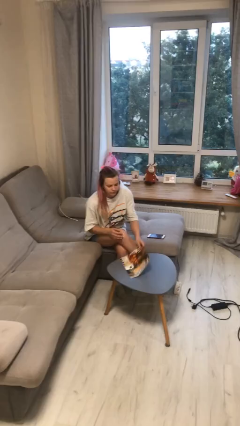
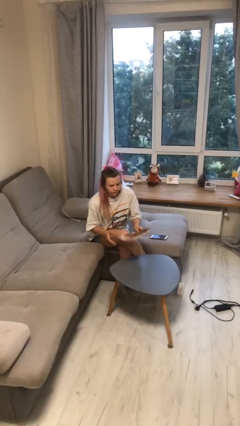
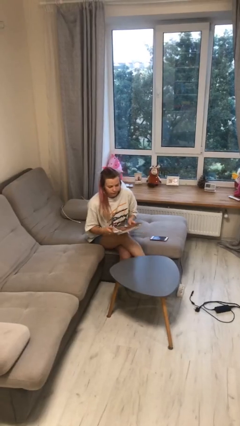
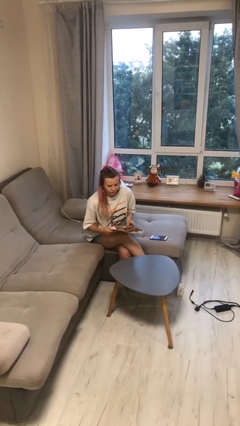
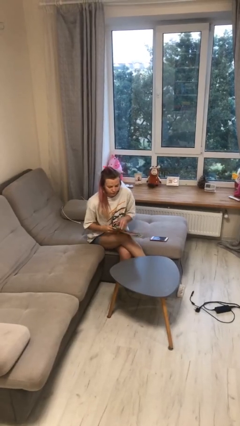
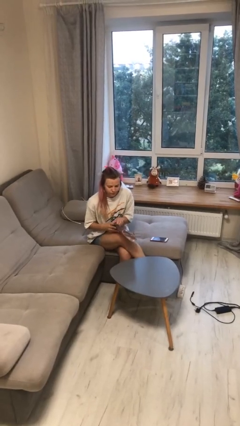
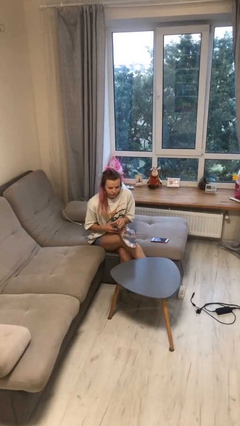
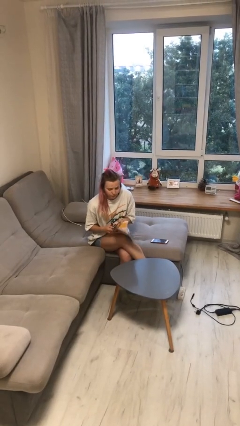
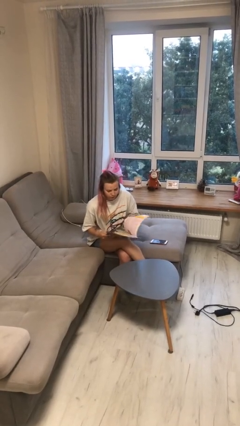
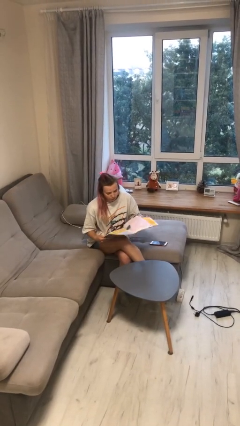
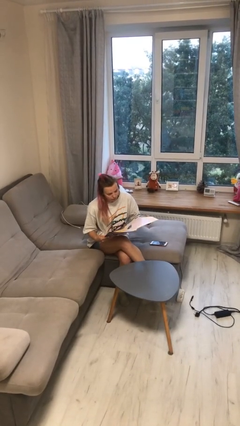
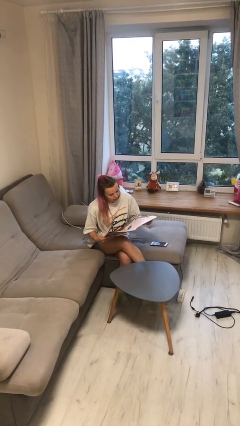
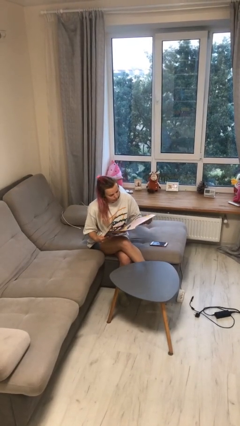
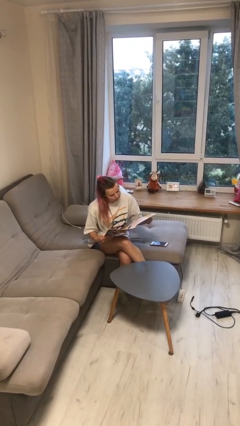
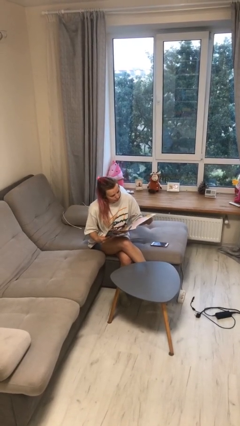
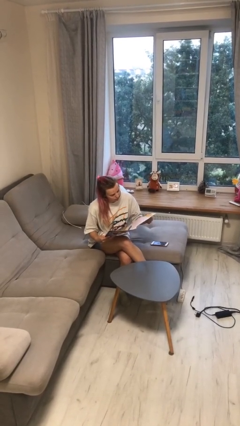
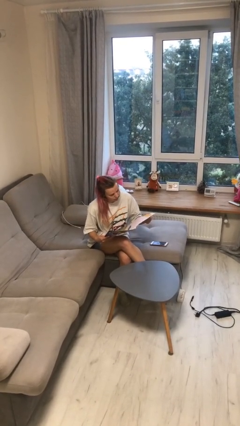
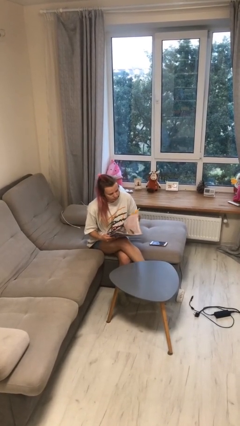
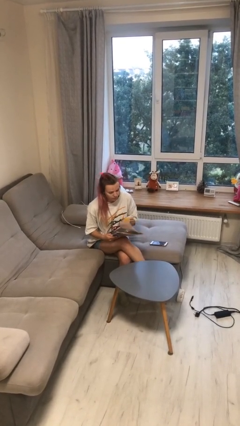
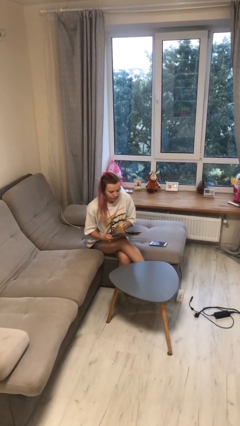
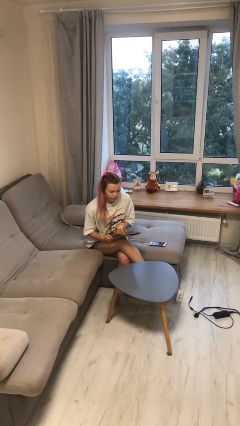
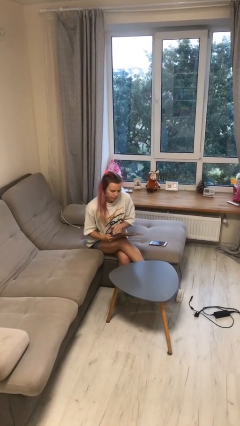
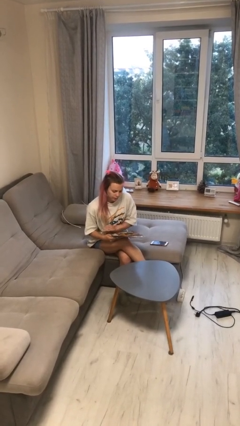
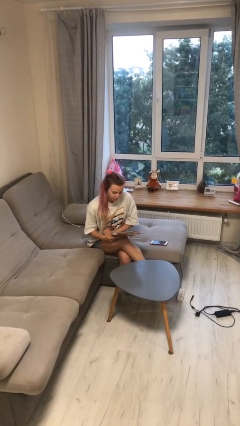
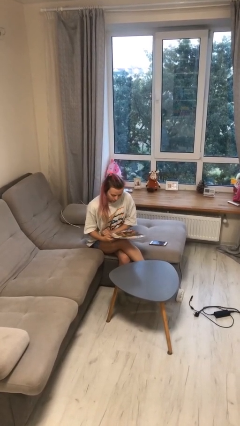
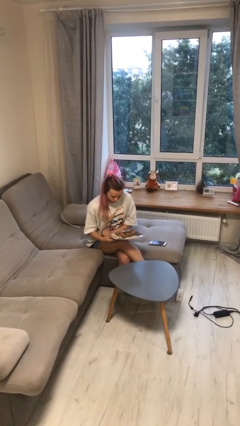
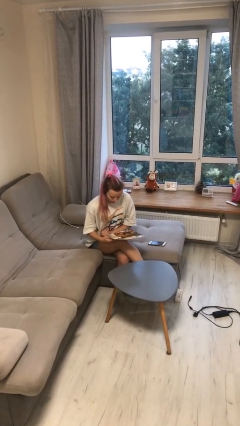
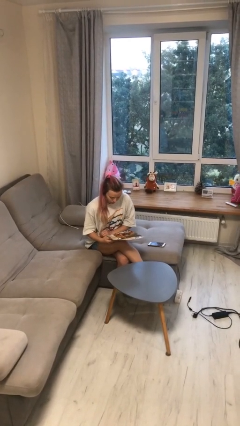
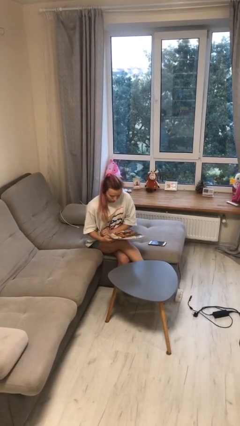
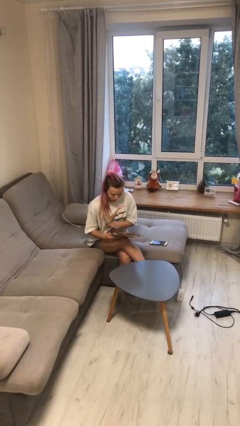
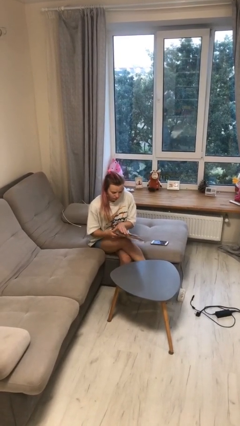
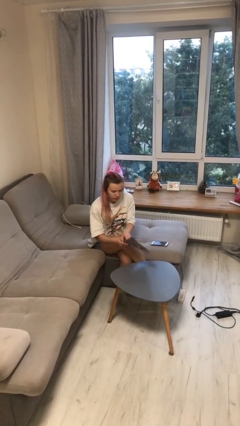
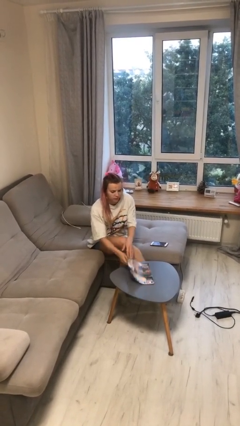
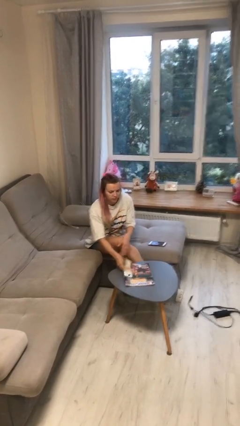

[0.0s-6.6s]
person reads magazine

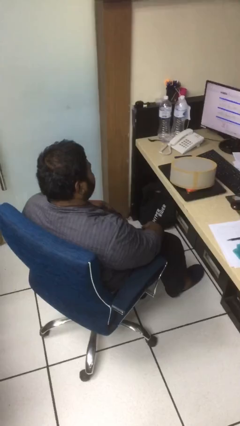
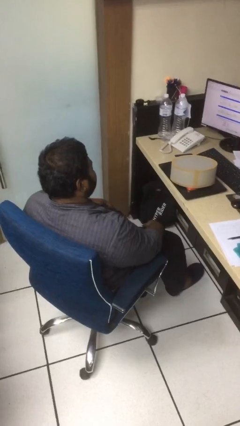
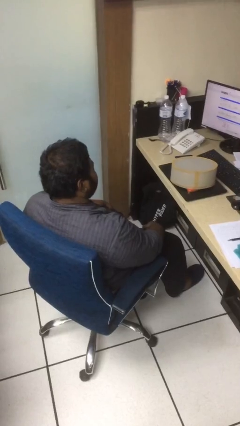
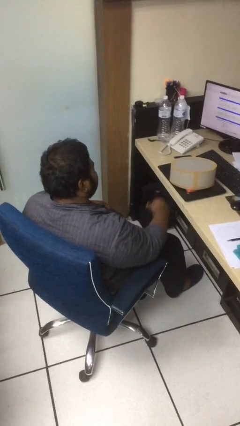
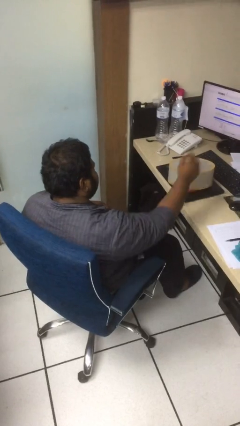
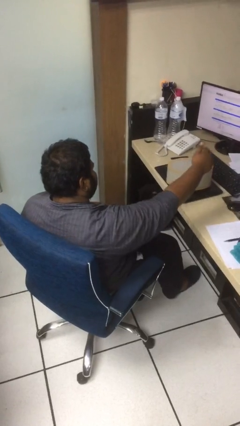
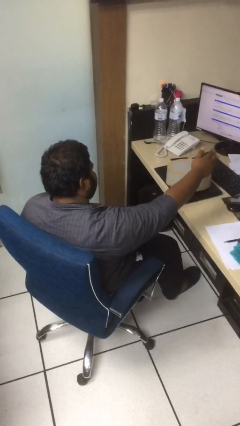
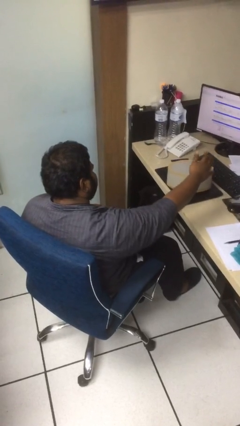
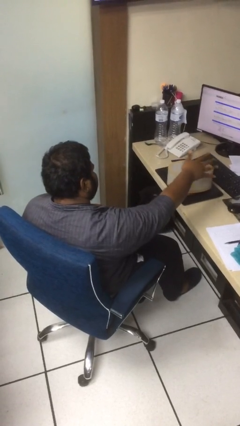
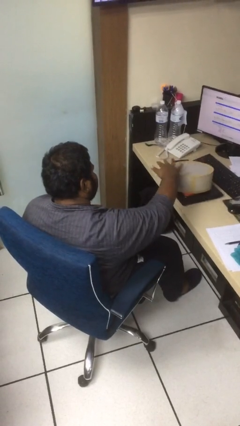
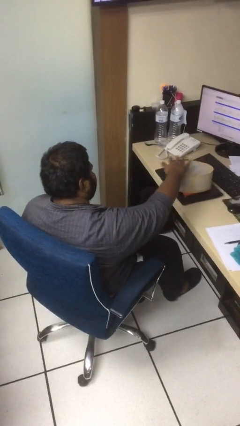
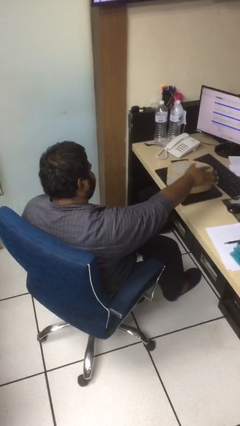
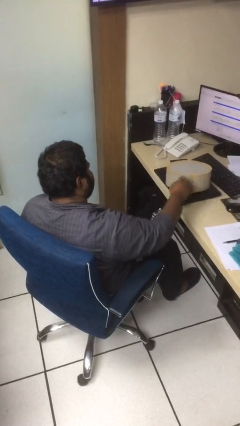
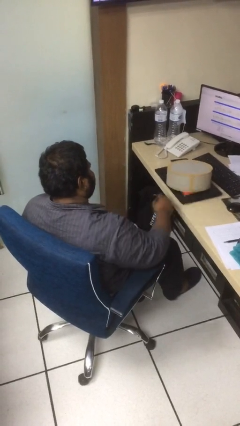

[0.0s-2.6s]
person waves hand over object

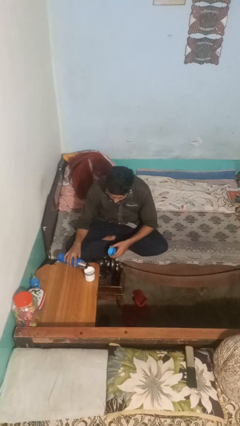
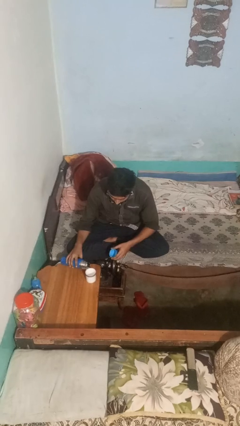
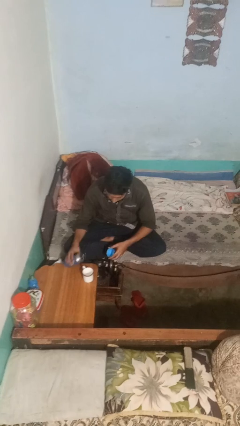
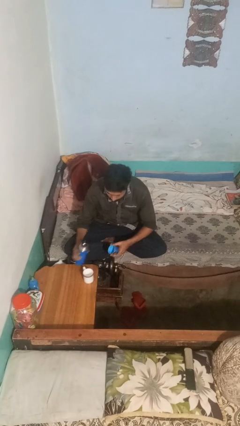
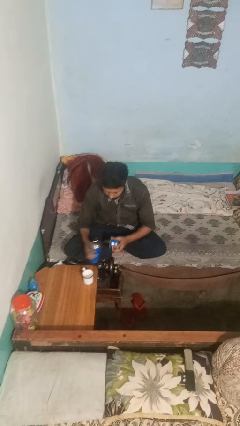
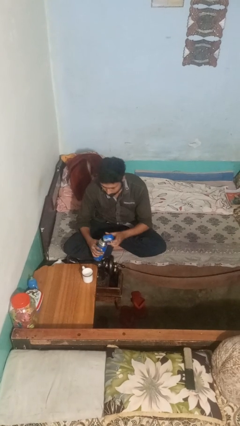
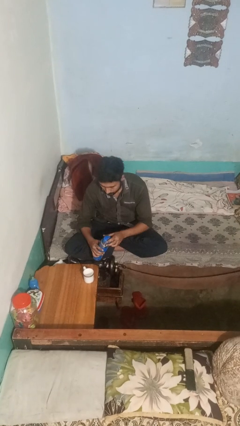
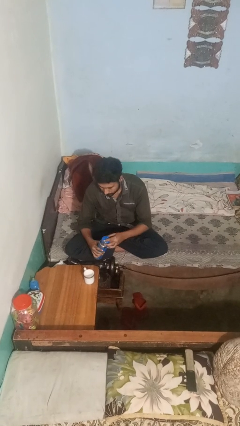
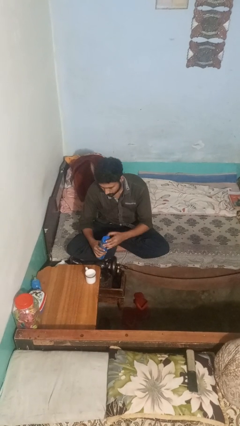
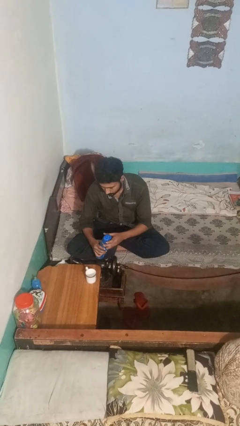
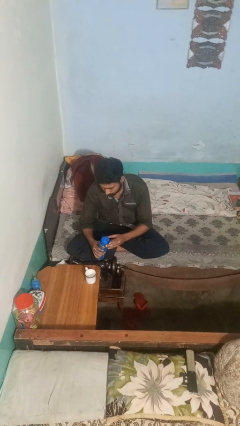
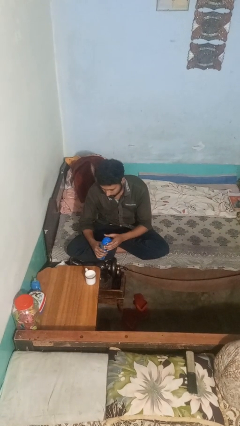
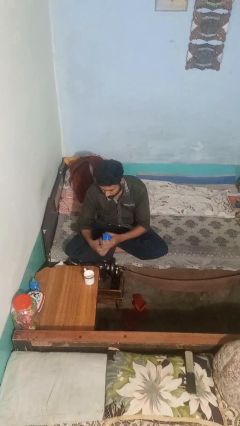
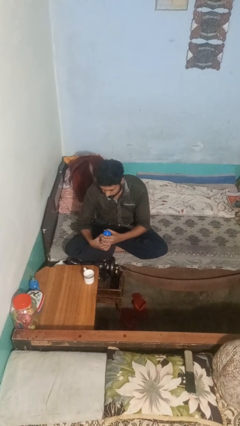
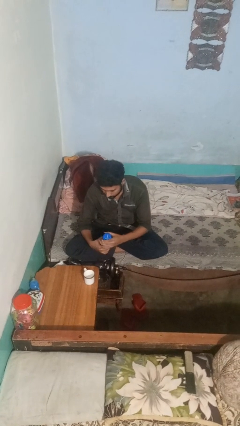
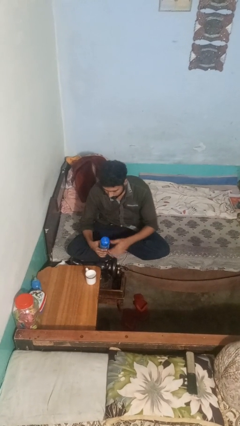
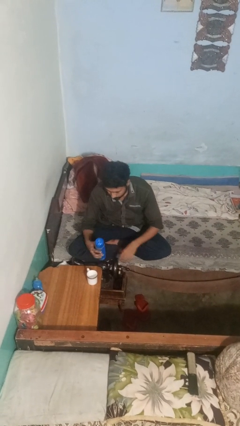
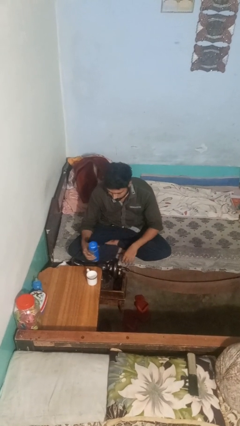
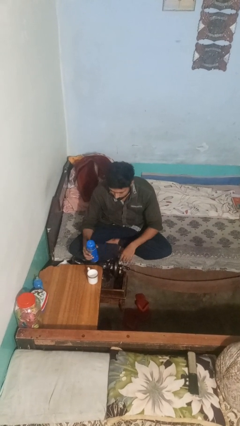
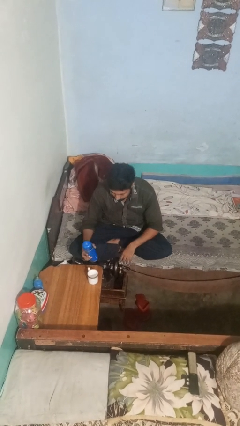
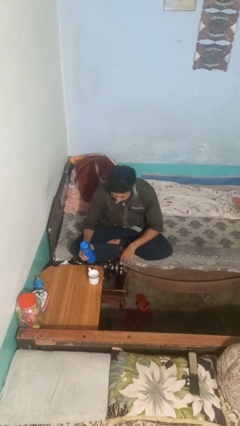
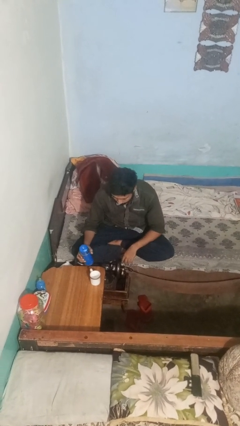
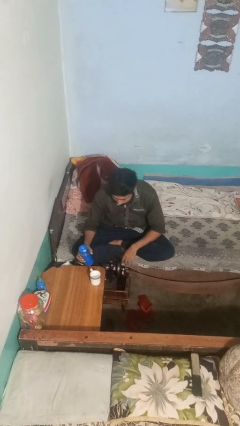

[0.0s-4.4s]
person screws lid to bottle

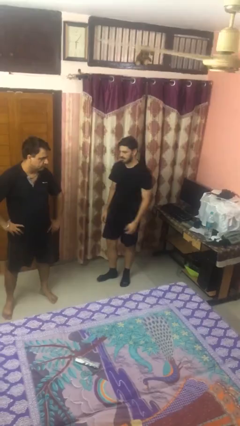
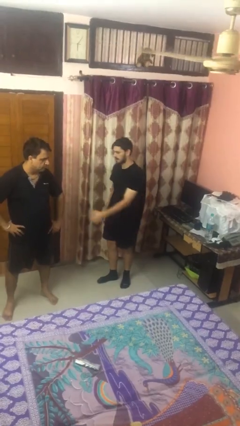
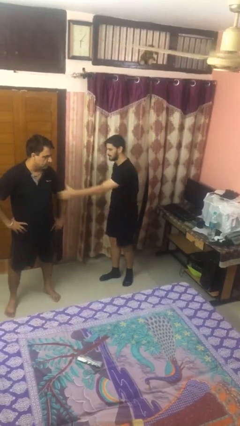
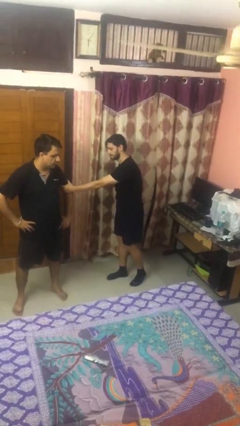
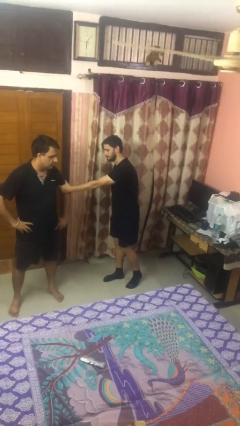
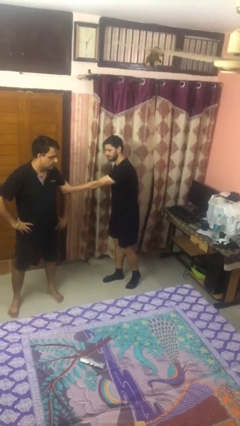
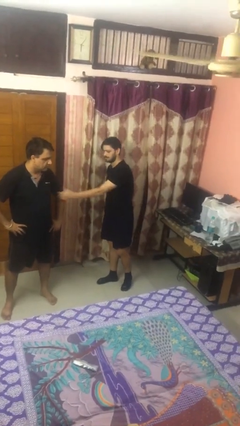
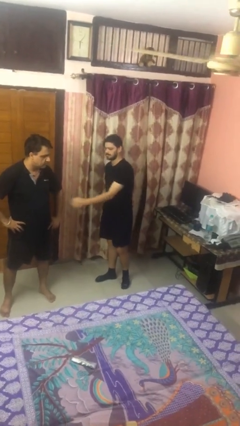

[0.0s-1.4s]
person grabs person by bicep

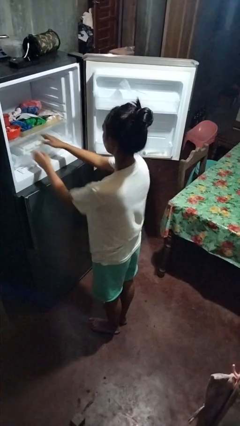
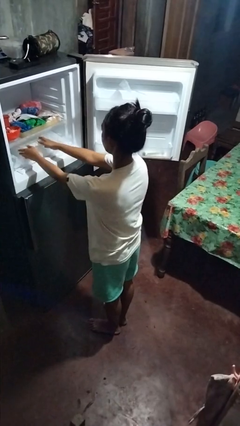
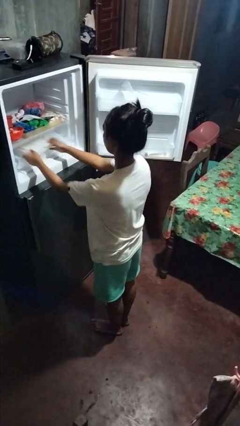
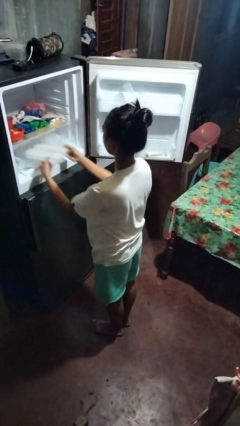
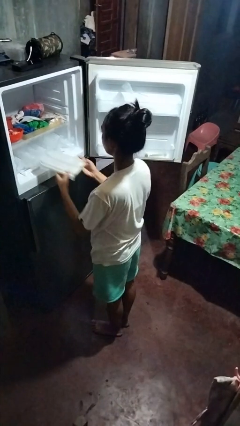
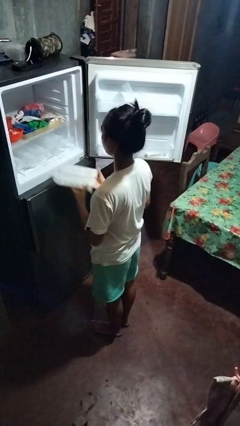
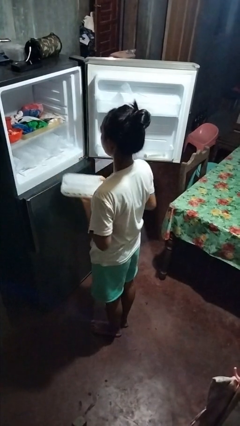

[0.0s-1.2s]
person takes object from refrigerator

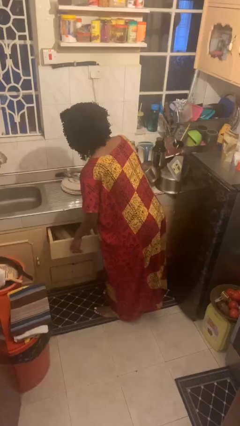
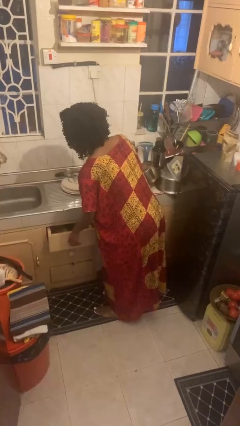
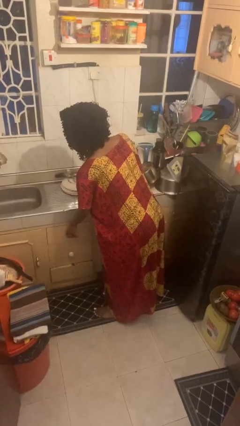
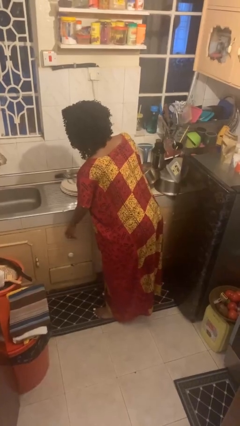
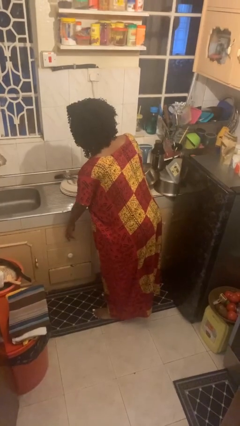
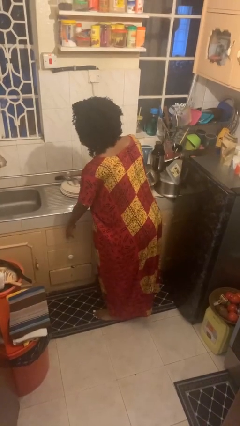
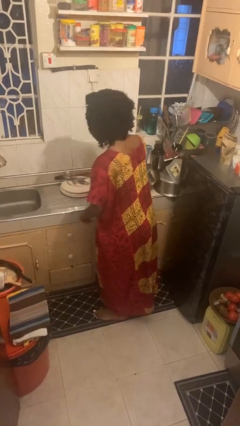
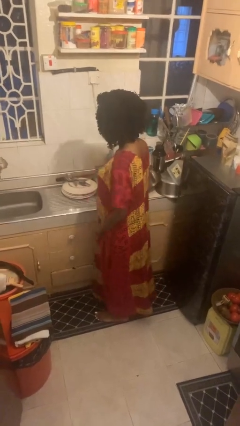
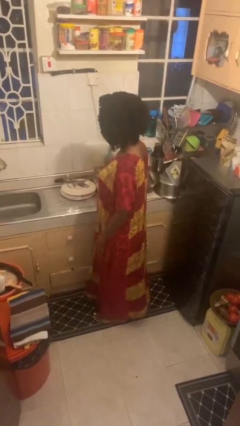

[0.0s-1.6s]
person closes kitchen drawer
